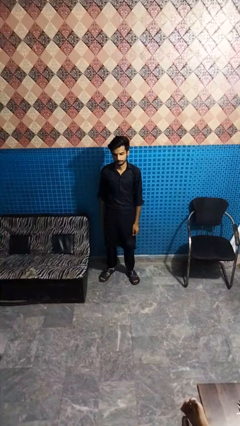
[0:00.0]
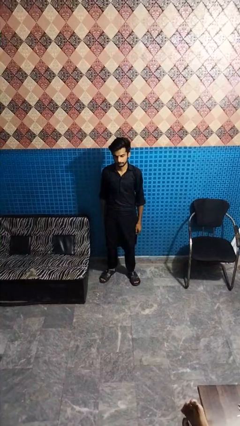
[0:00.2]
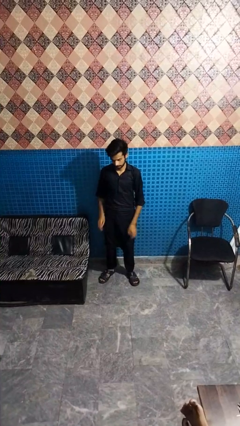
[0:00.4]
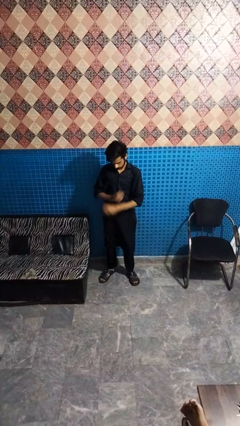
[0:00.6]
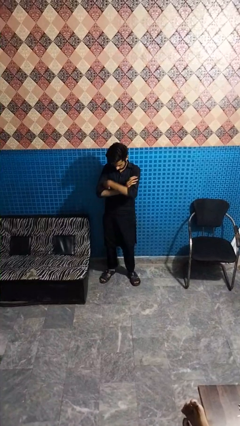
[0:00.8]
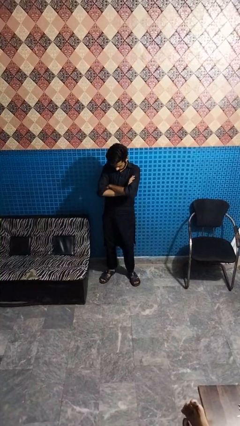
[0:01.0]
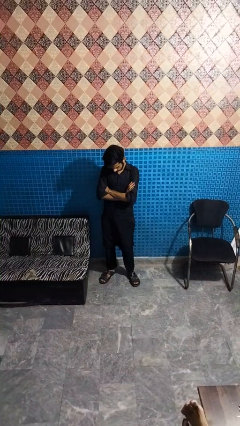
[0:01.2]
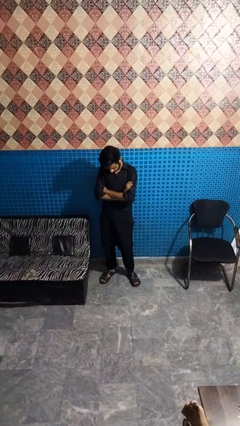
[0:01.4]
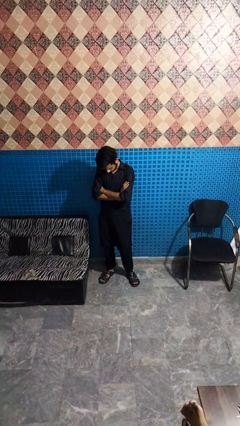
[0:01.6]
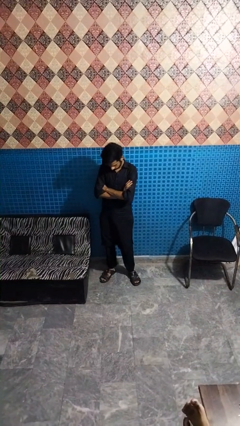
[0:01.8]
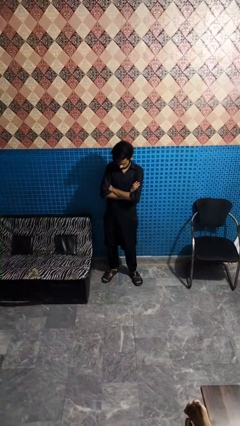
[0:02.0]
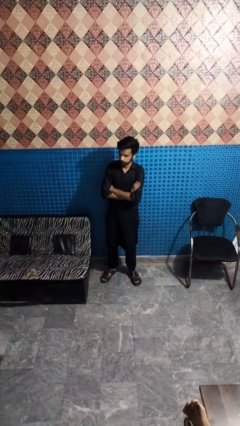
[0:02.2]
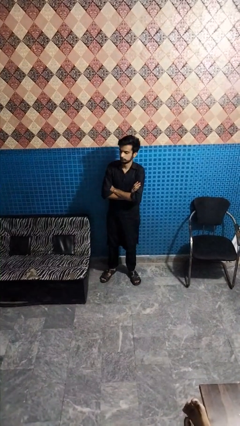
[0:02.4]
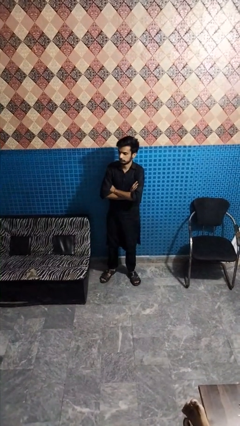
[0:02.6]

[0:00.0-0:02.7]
person crosses arms

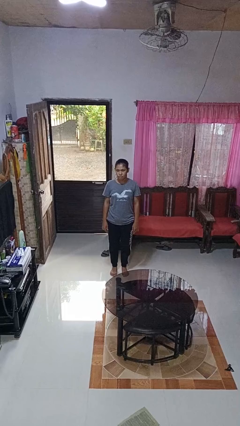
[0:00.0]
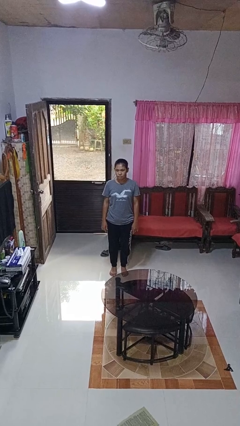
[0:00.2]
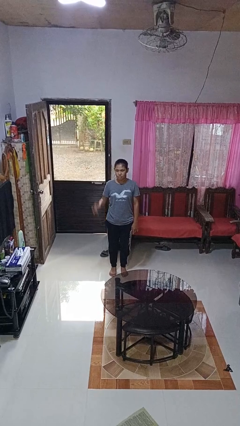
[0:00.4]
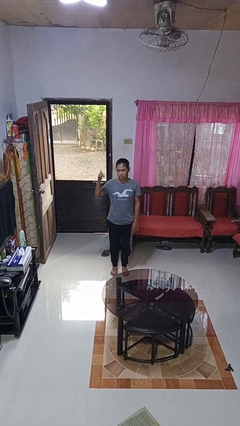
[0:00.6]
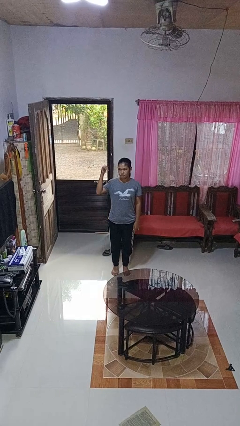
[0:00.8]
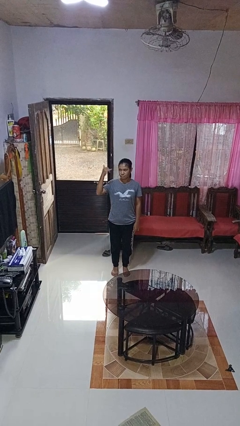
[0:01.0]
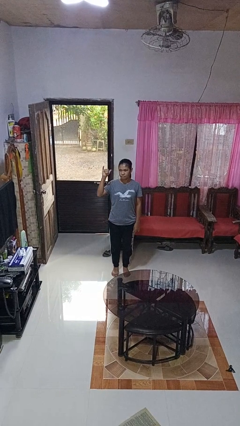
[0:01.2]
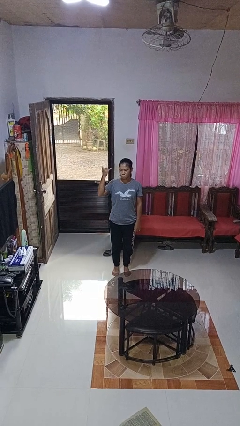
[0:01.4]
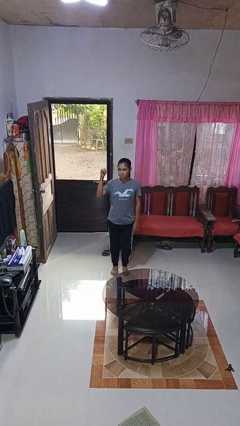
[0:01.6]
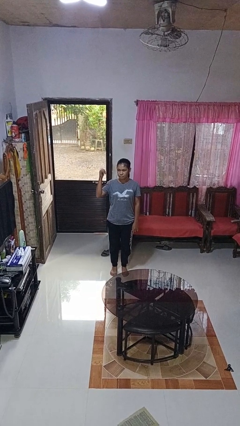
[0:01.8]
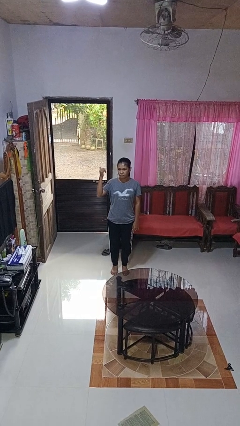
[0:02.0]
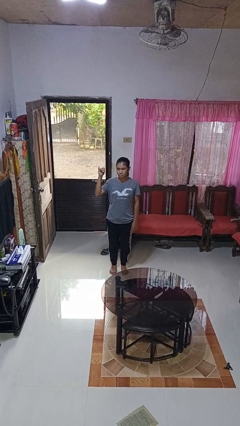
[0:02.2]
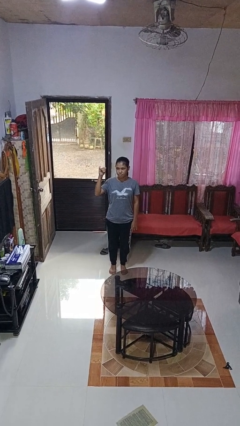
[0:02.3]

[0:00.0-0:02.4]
person gestures hang loose

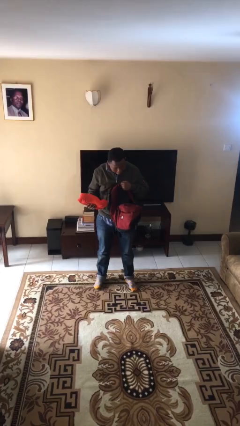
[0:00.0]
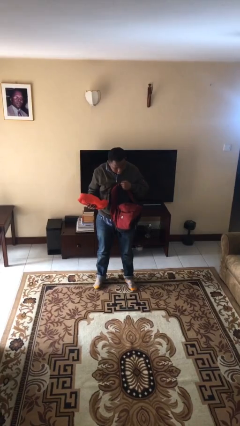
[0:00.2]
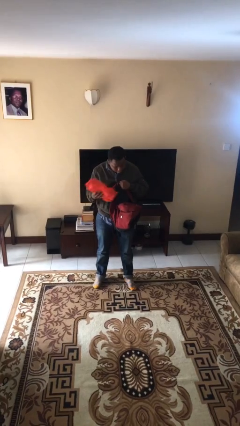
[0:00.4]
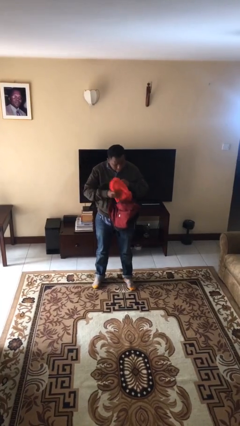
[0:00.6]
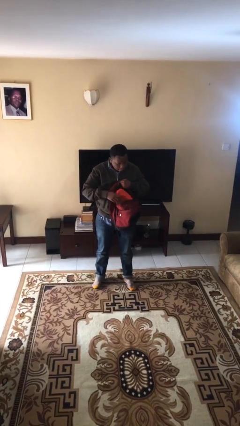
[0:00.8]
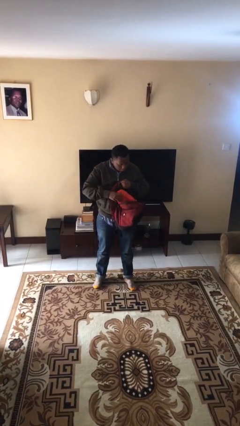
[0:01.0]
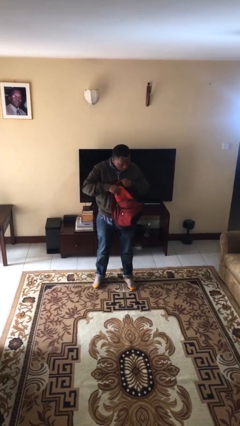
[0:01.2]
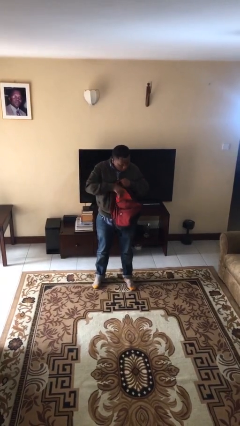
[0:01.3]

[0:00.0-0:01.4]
person puts object into backpack

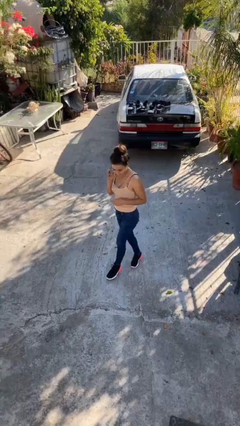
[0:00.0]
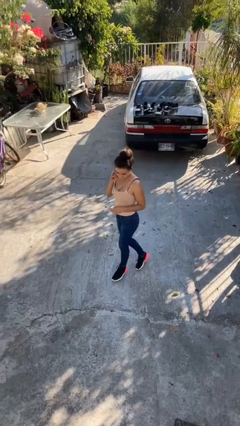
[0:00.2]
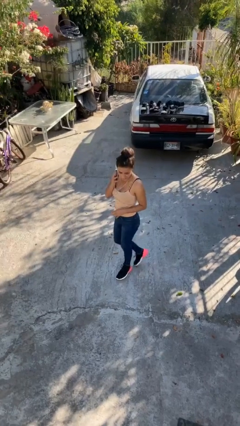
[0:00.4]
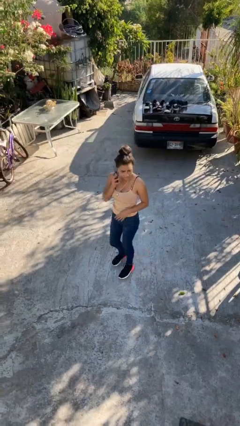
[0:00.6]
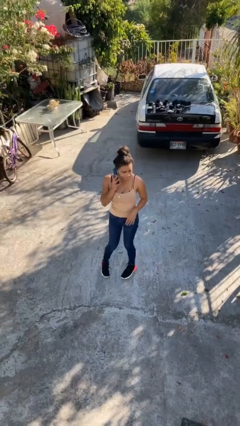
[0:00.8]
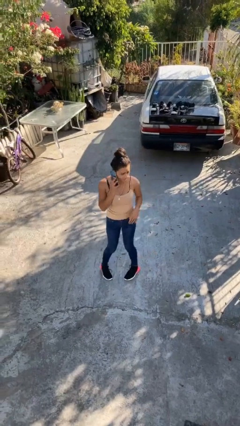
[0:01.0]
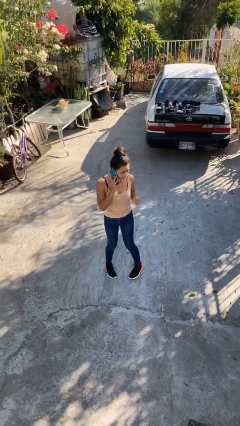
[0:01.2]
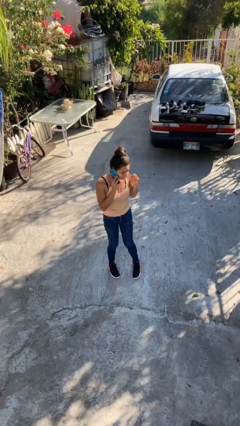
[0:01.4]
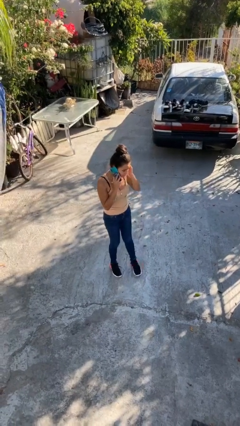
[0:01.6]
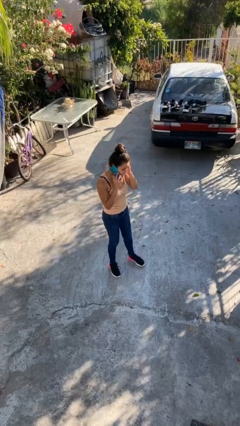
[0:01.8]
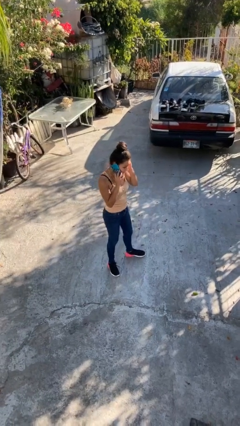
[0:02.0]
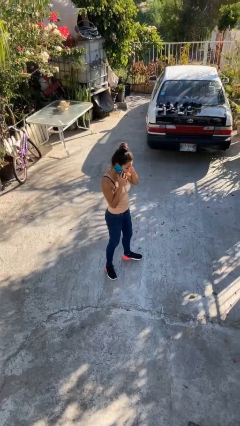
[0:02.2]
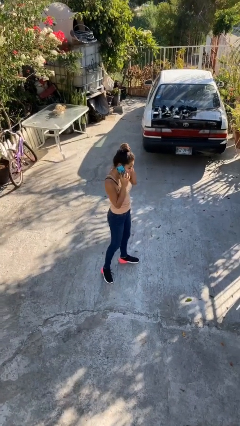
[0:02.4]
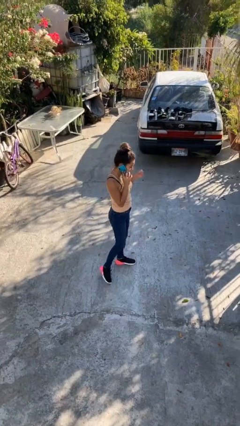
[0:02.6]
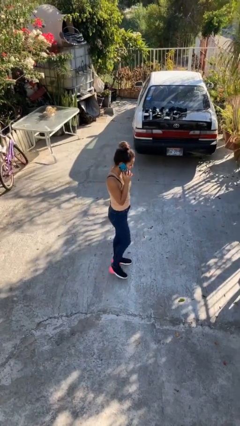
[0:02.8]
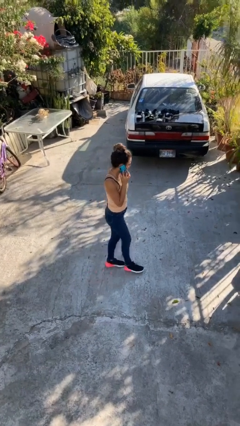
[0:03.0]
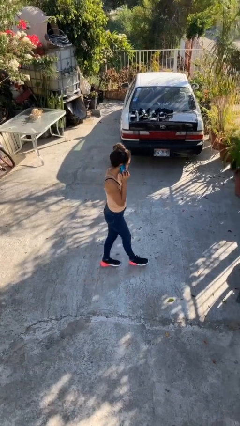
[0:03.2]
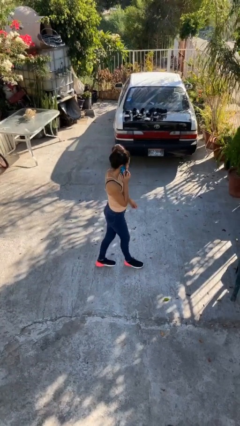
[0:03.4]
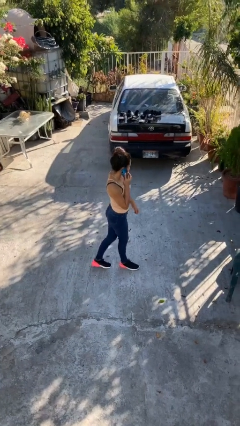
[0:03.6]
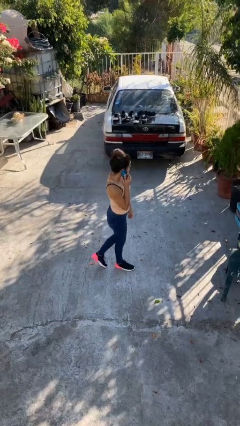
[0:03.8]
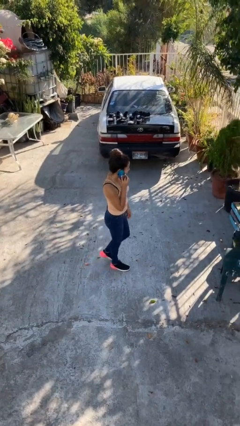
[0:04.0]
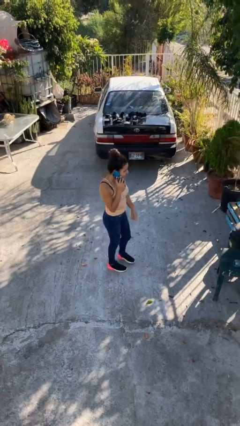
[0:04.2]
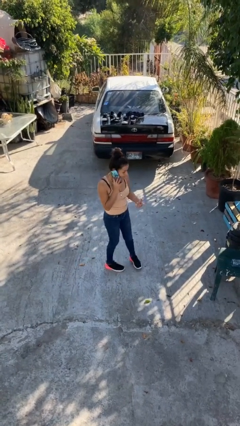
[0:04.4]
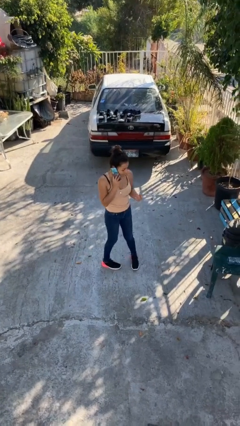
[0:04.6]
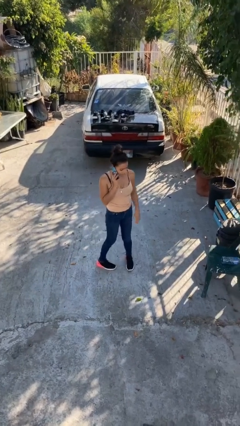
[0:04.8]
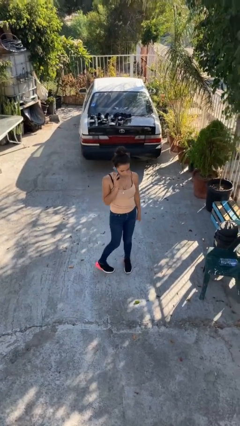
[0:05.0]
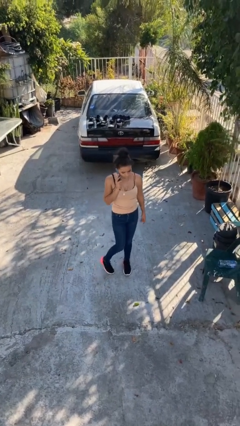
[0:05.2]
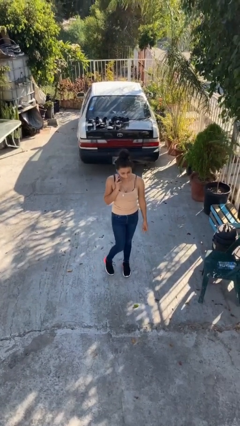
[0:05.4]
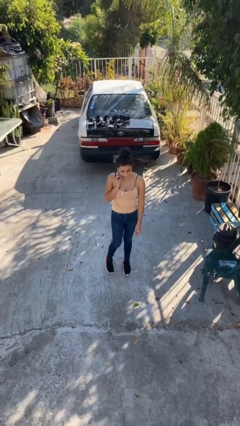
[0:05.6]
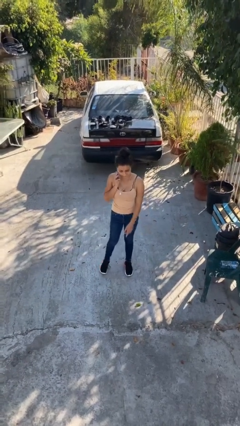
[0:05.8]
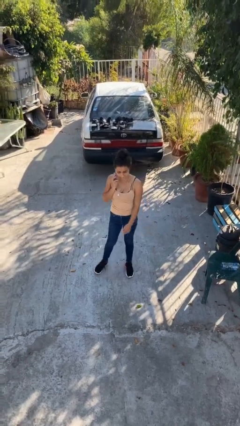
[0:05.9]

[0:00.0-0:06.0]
person talks on phone

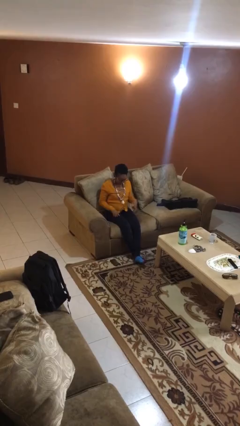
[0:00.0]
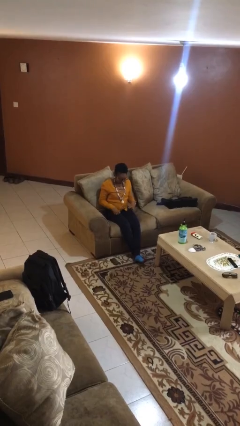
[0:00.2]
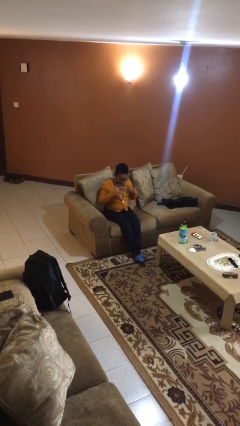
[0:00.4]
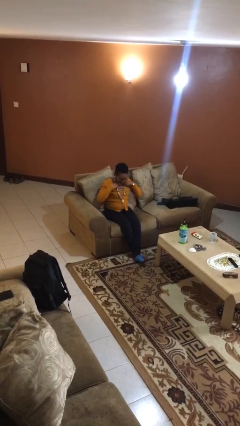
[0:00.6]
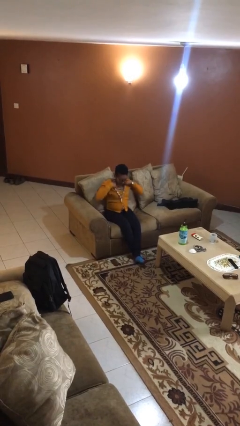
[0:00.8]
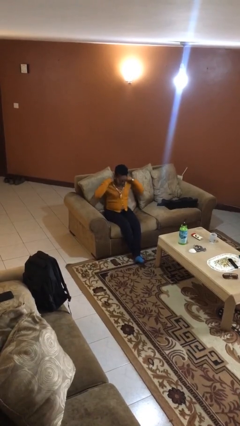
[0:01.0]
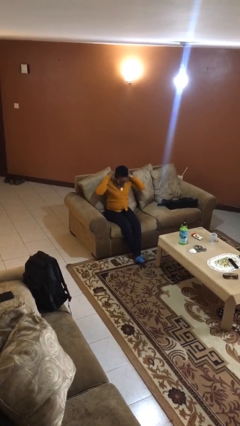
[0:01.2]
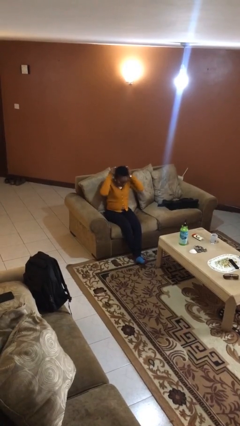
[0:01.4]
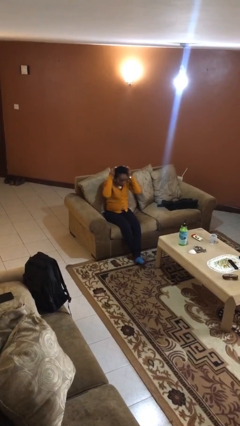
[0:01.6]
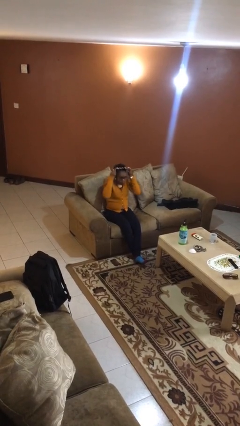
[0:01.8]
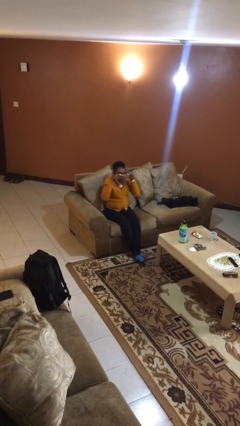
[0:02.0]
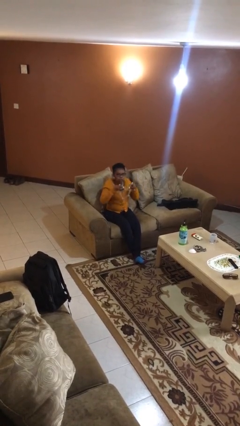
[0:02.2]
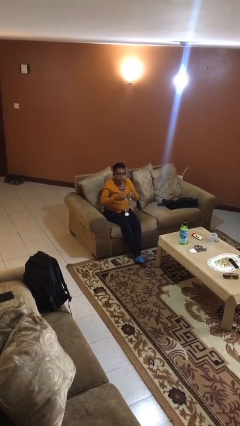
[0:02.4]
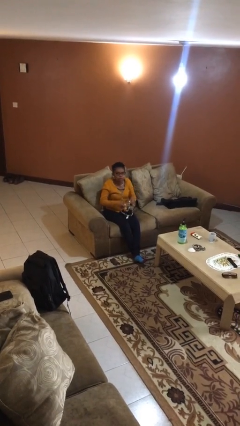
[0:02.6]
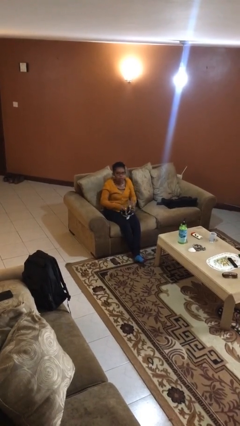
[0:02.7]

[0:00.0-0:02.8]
person takes off necklace

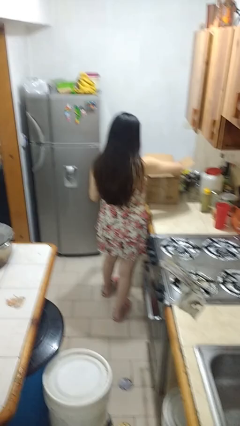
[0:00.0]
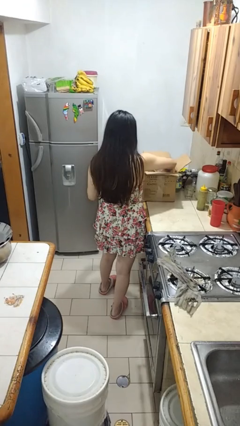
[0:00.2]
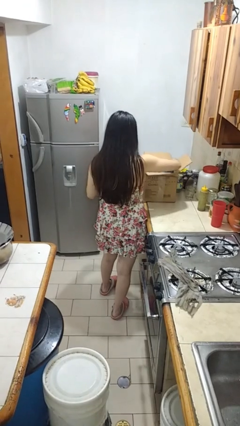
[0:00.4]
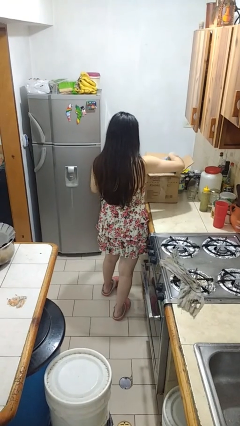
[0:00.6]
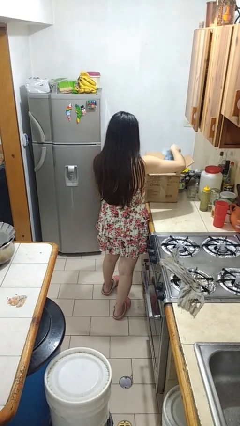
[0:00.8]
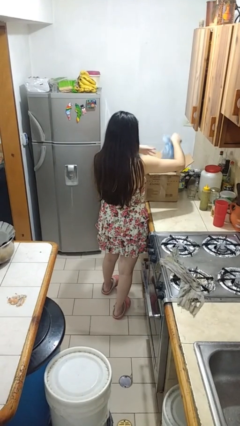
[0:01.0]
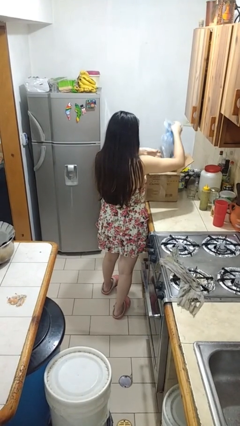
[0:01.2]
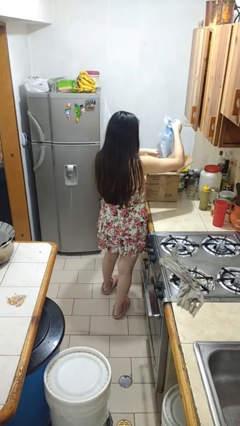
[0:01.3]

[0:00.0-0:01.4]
person takes object from box

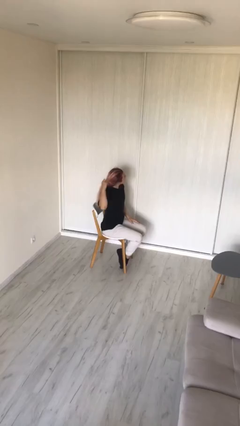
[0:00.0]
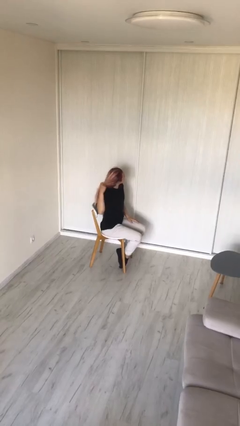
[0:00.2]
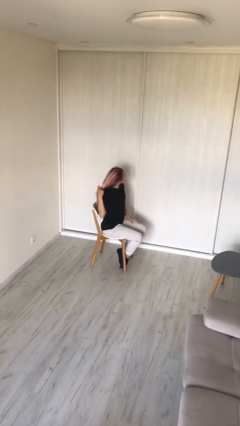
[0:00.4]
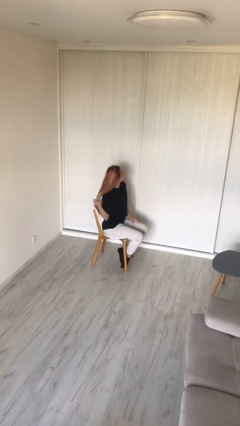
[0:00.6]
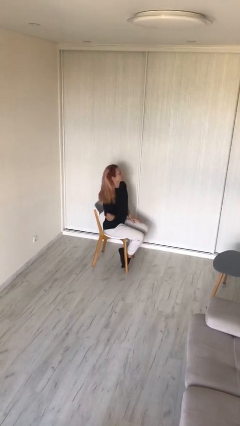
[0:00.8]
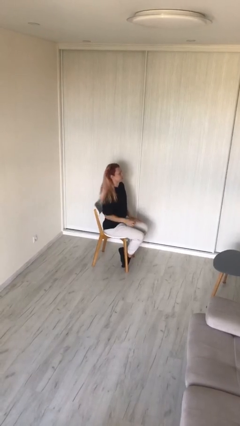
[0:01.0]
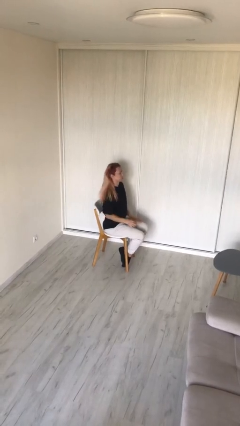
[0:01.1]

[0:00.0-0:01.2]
person takes off hairtie
